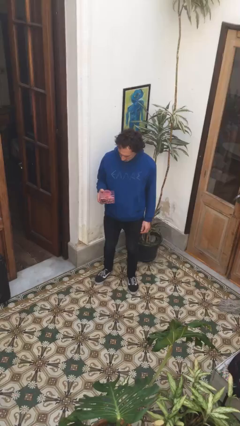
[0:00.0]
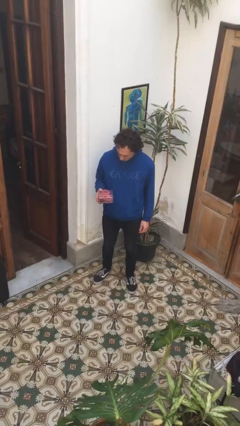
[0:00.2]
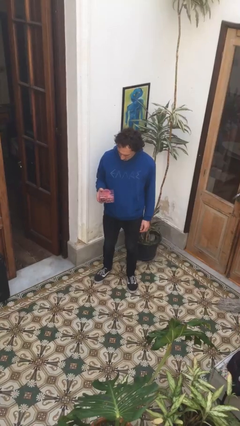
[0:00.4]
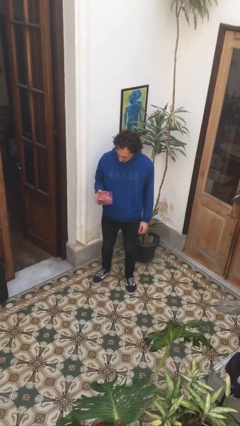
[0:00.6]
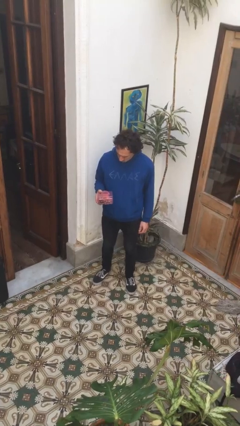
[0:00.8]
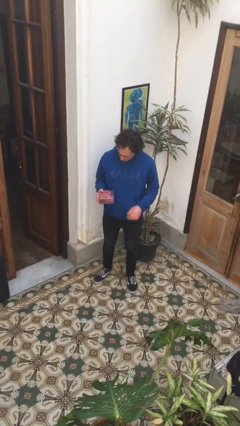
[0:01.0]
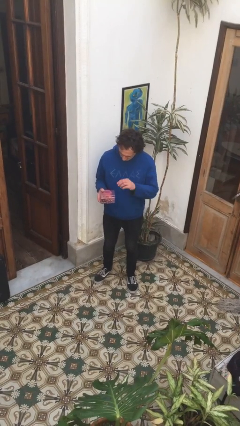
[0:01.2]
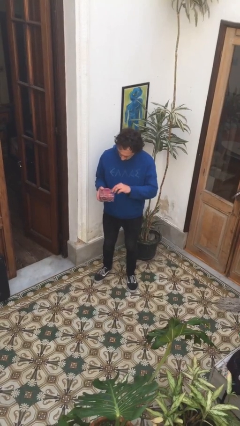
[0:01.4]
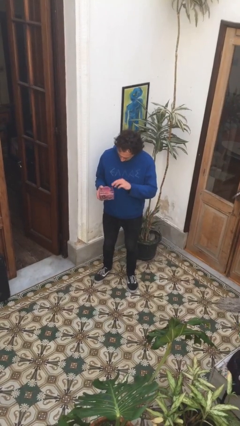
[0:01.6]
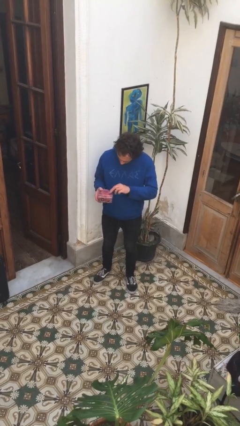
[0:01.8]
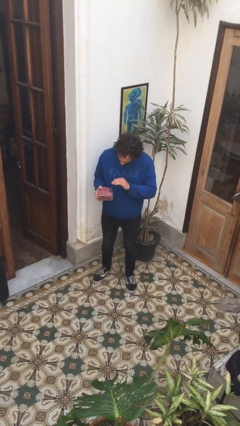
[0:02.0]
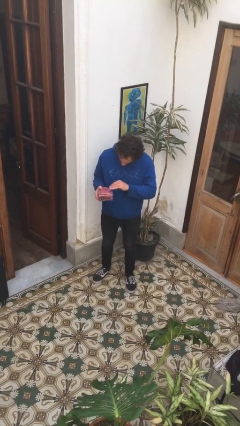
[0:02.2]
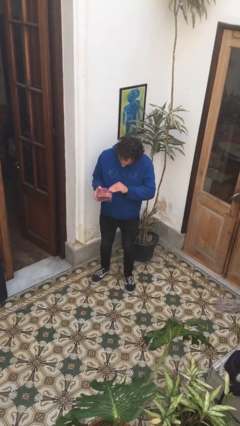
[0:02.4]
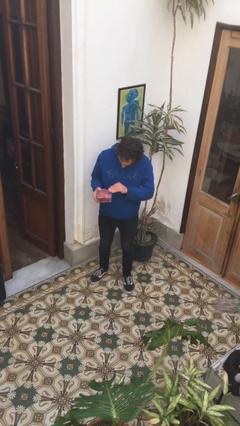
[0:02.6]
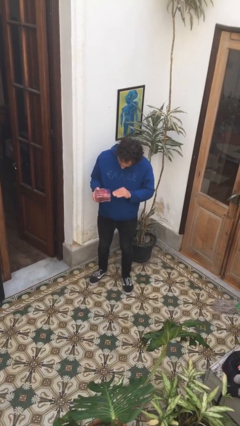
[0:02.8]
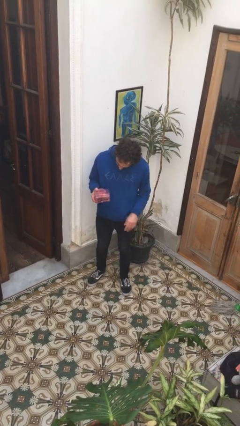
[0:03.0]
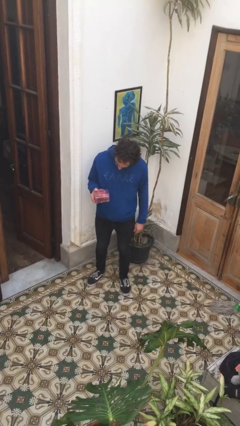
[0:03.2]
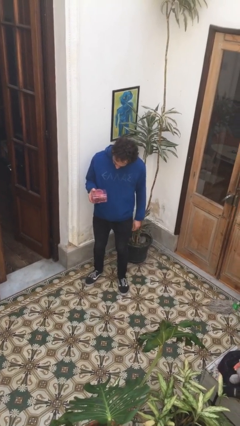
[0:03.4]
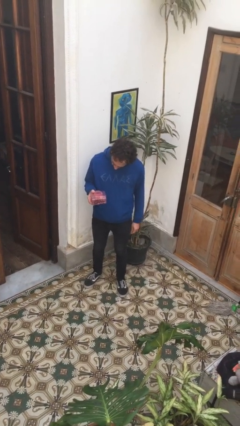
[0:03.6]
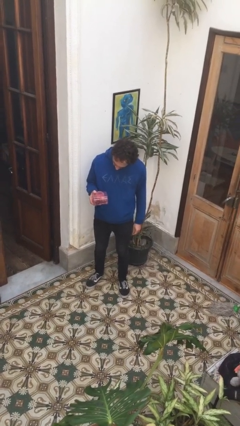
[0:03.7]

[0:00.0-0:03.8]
person taps object with finger

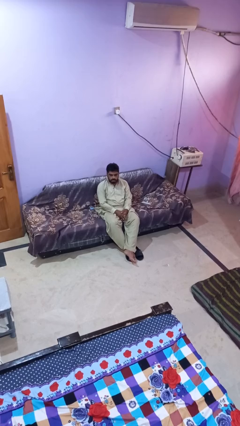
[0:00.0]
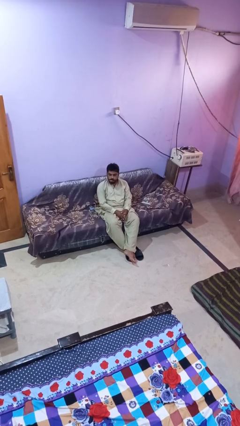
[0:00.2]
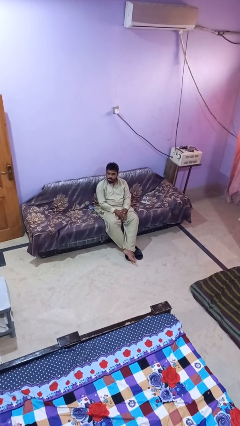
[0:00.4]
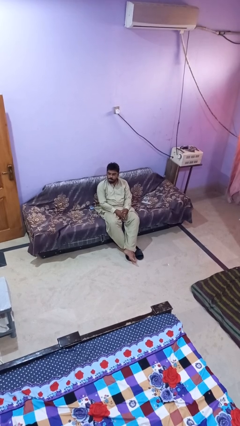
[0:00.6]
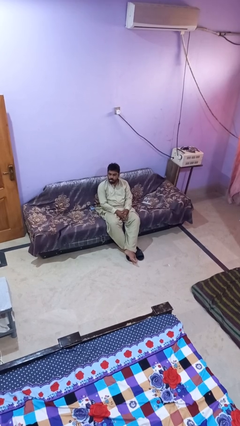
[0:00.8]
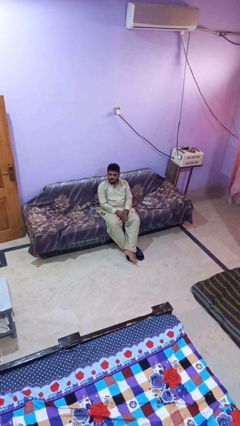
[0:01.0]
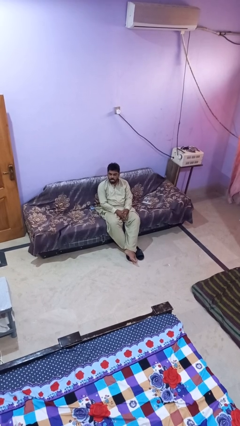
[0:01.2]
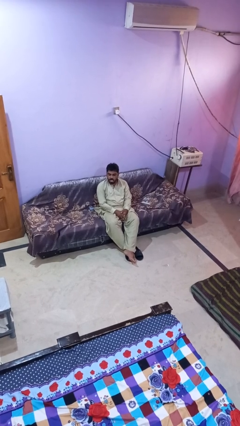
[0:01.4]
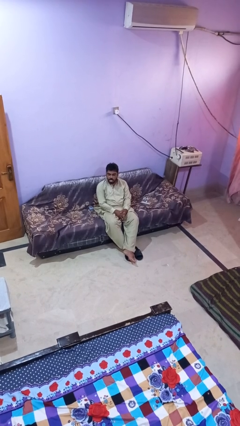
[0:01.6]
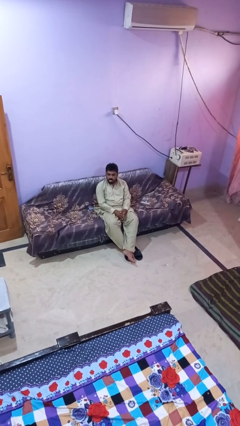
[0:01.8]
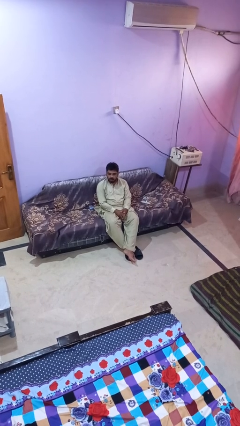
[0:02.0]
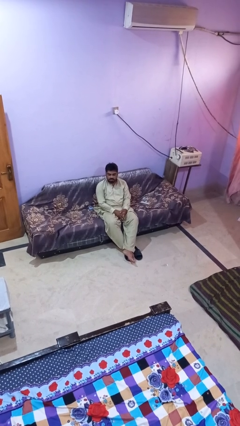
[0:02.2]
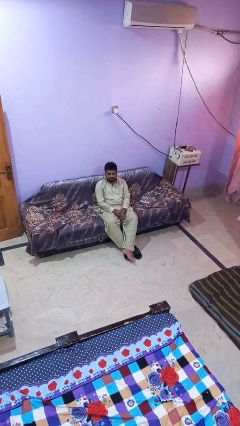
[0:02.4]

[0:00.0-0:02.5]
person sticks out tongue

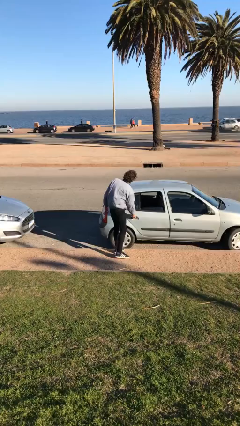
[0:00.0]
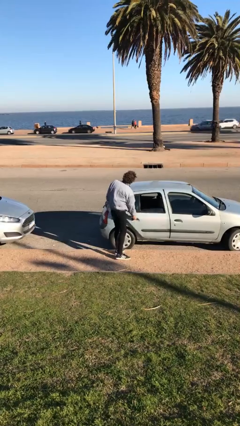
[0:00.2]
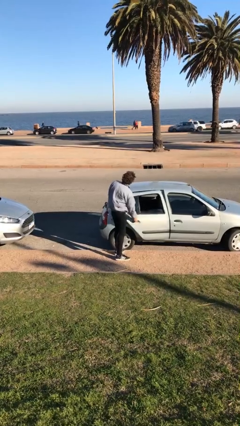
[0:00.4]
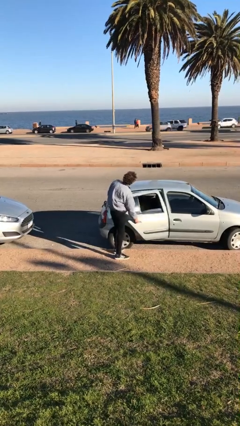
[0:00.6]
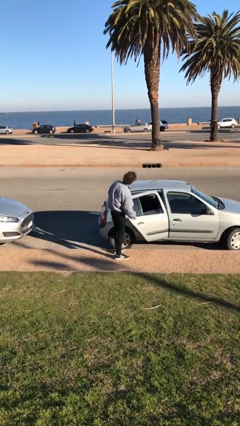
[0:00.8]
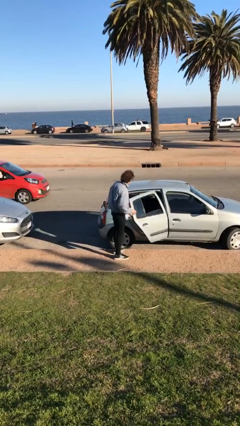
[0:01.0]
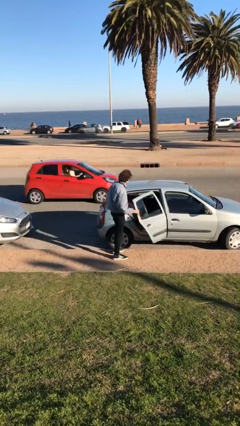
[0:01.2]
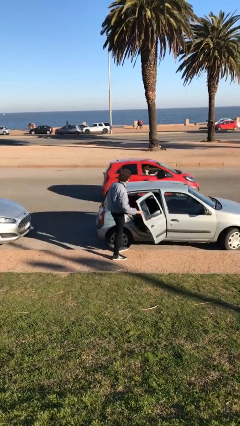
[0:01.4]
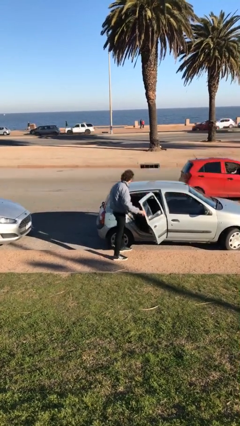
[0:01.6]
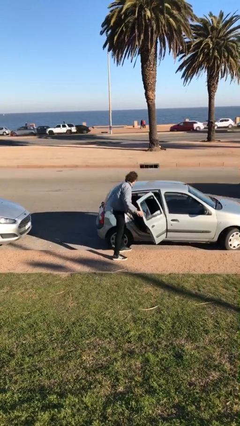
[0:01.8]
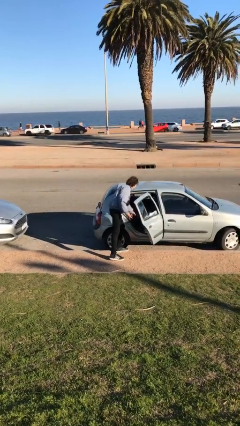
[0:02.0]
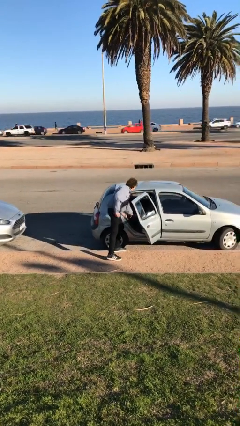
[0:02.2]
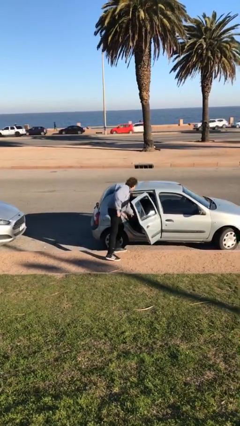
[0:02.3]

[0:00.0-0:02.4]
person opens car door

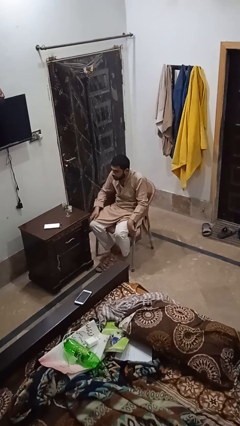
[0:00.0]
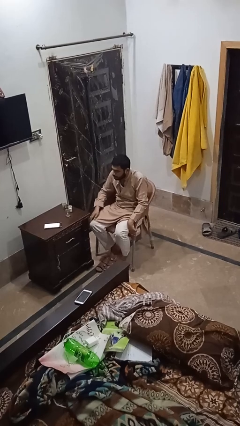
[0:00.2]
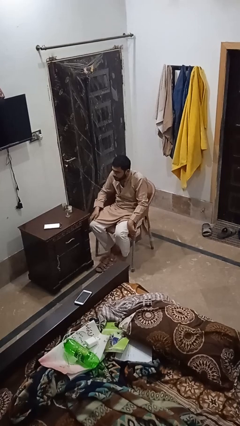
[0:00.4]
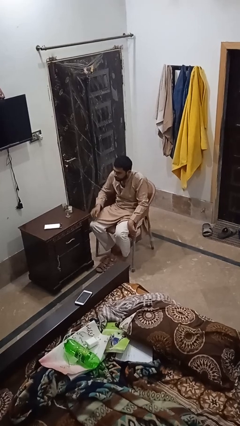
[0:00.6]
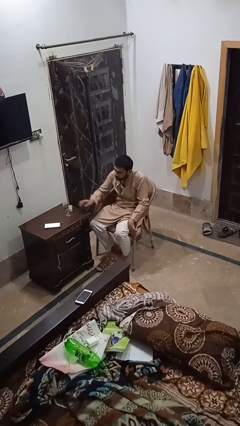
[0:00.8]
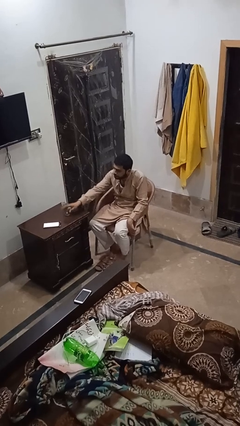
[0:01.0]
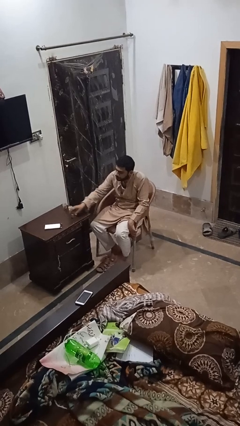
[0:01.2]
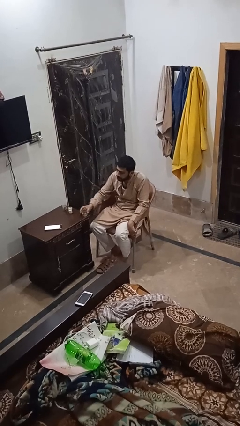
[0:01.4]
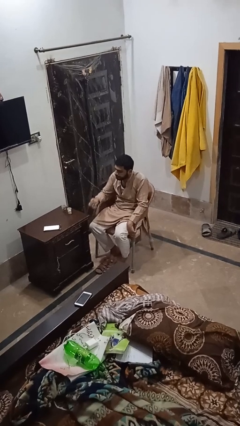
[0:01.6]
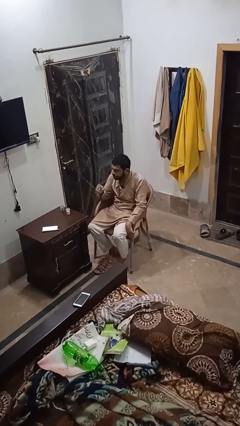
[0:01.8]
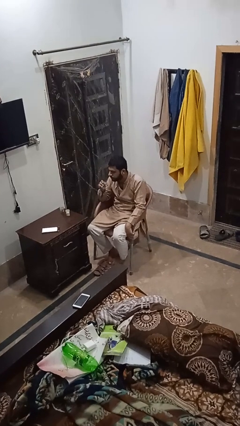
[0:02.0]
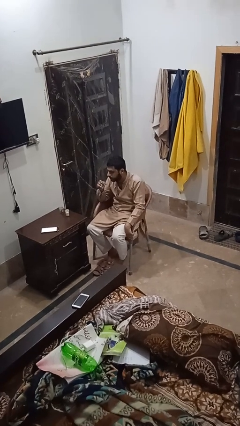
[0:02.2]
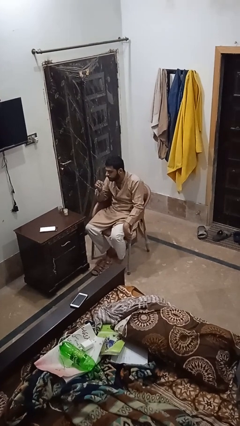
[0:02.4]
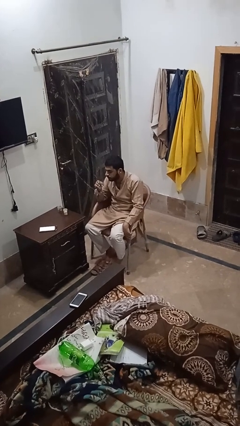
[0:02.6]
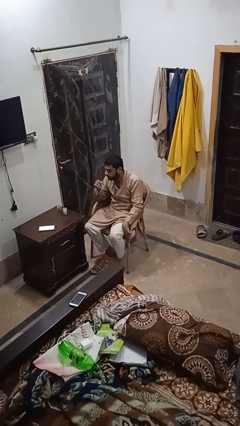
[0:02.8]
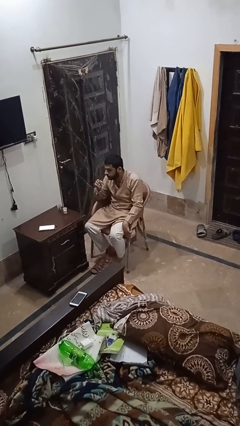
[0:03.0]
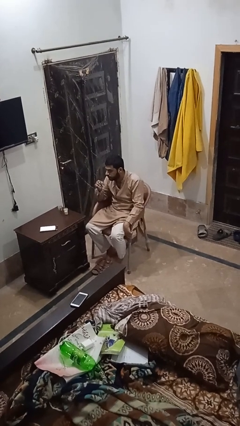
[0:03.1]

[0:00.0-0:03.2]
person picks up object from table

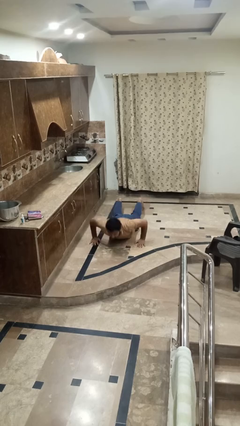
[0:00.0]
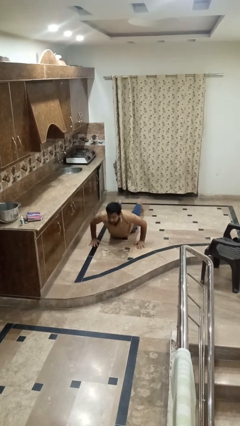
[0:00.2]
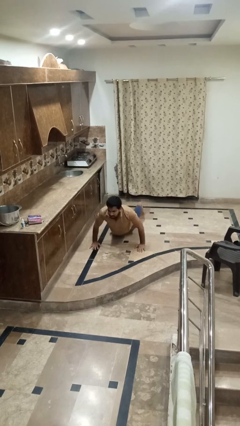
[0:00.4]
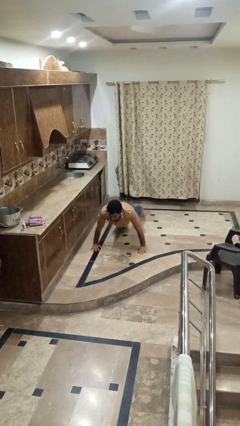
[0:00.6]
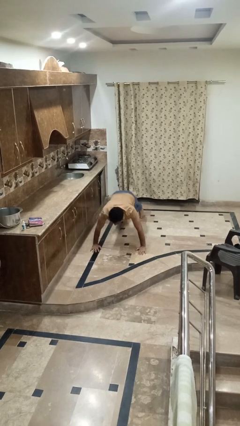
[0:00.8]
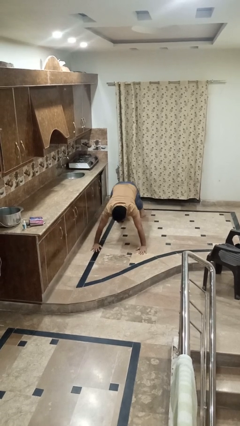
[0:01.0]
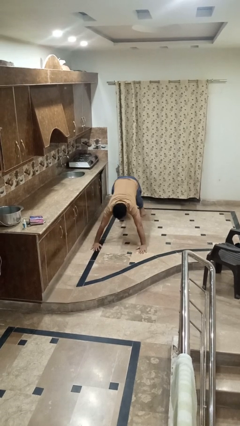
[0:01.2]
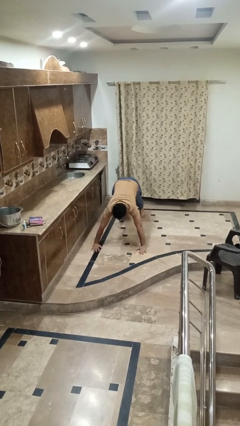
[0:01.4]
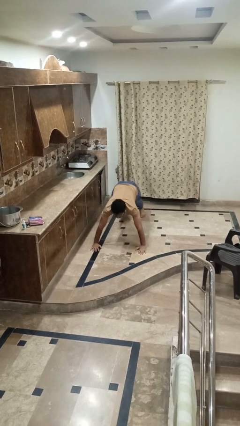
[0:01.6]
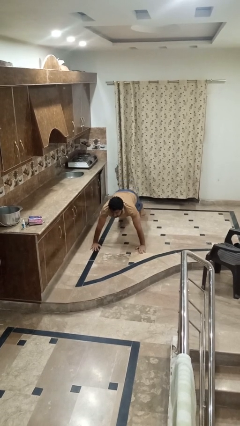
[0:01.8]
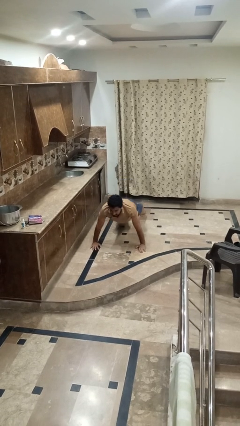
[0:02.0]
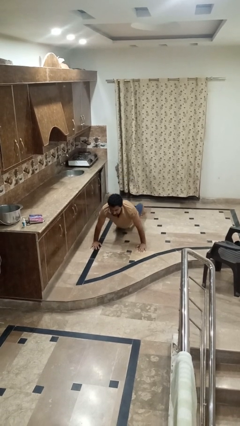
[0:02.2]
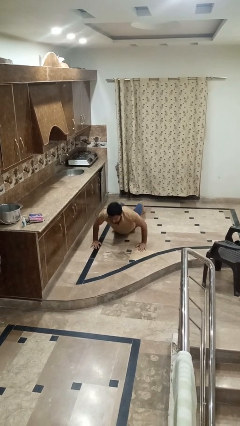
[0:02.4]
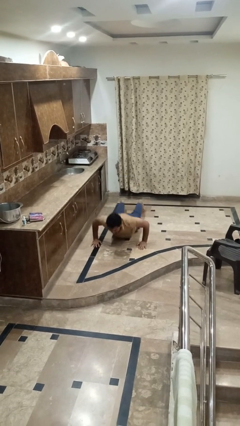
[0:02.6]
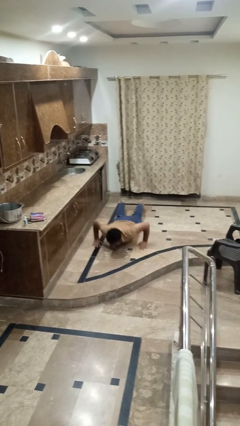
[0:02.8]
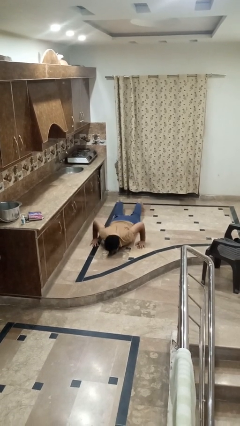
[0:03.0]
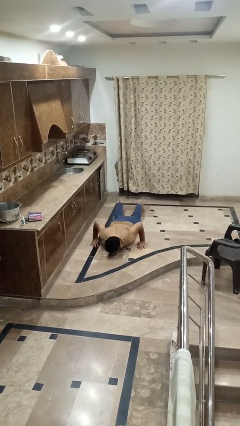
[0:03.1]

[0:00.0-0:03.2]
person exercises with pushup

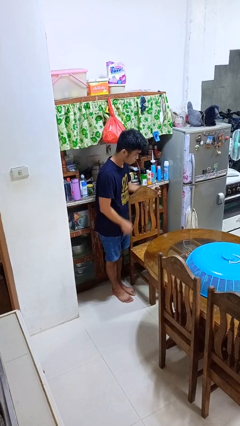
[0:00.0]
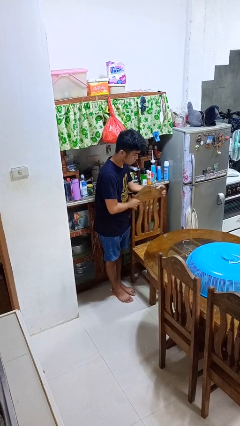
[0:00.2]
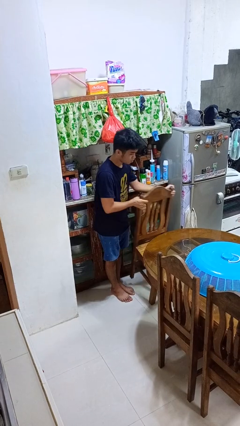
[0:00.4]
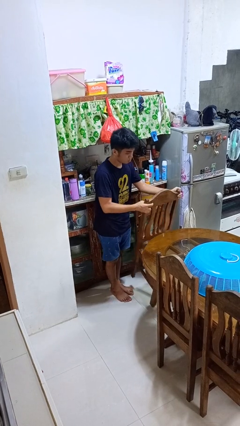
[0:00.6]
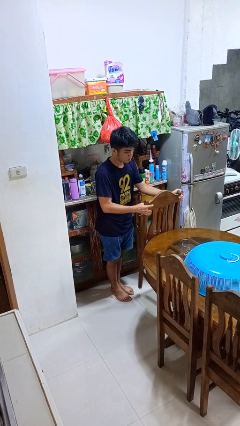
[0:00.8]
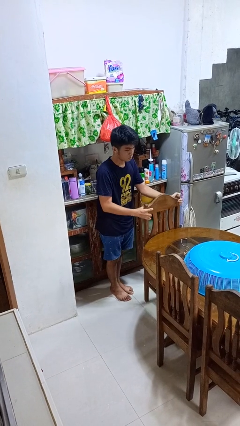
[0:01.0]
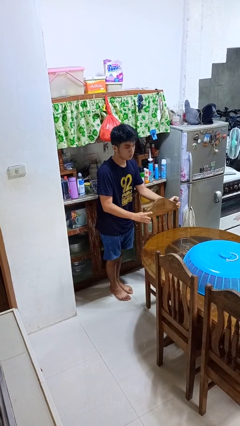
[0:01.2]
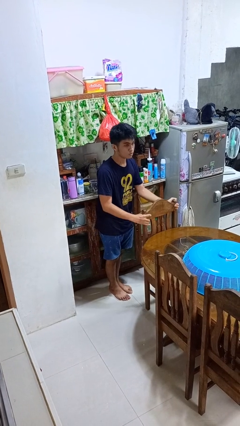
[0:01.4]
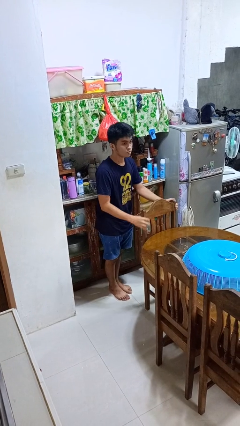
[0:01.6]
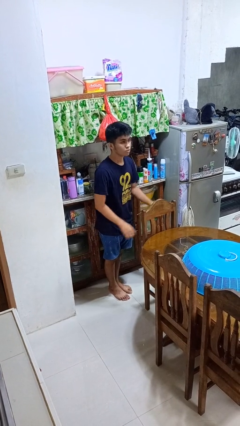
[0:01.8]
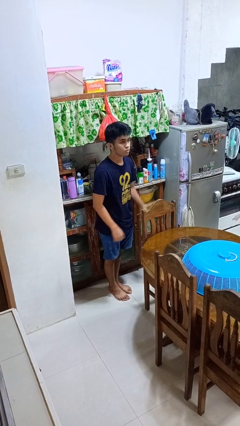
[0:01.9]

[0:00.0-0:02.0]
person pushes in chair

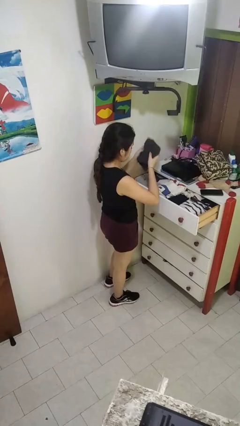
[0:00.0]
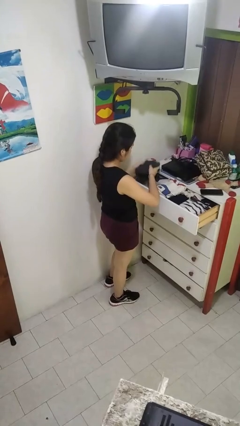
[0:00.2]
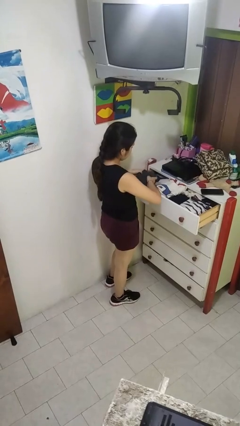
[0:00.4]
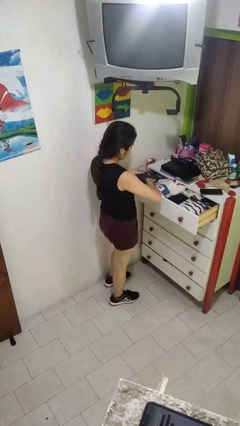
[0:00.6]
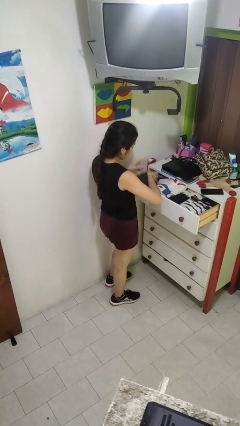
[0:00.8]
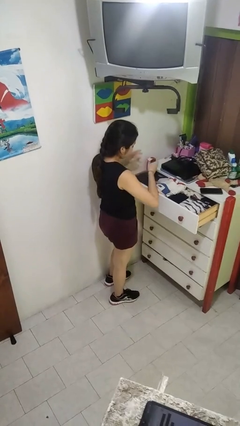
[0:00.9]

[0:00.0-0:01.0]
person puts clothes into dresser
